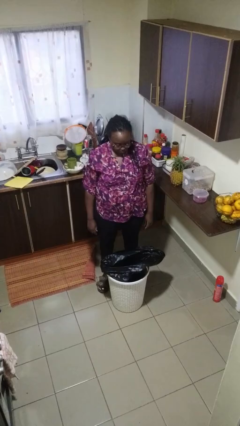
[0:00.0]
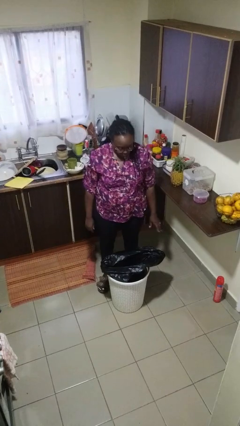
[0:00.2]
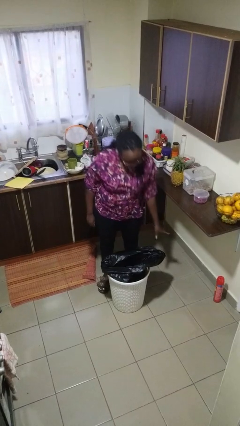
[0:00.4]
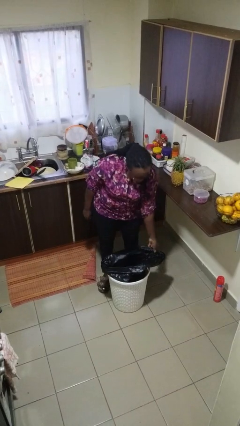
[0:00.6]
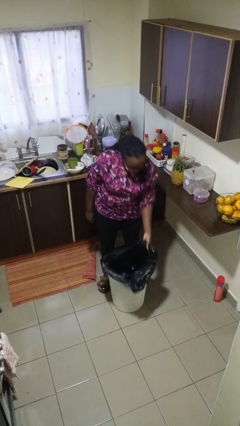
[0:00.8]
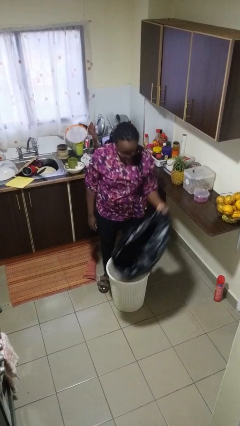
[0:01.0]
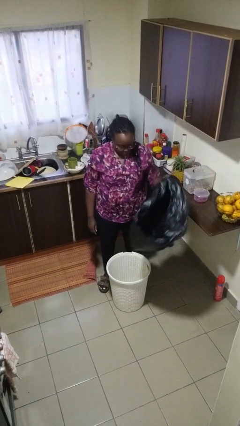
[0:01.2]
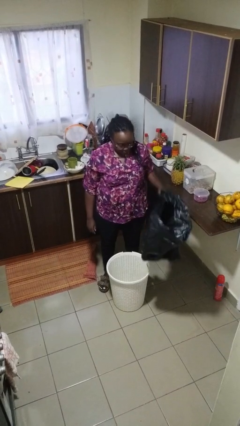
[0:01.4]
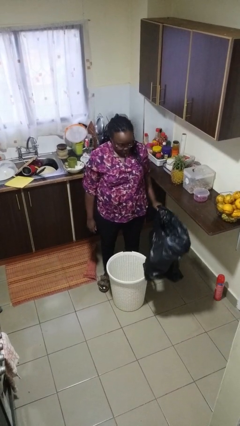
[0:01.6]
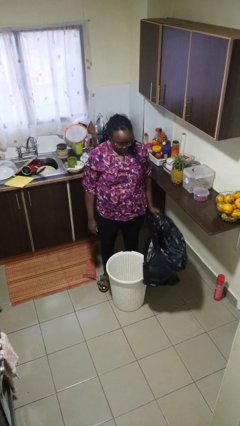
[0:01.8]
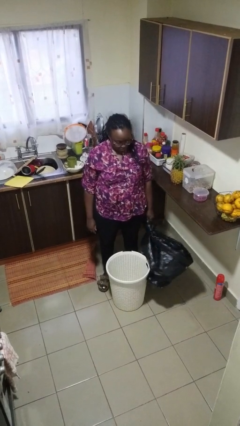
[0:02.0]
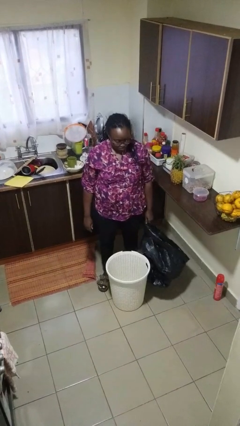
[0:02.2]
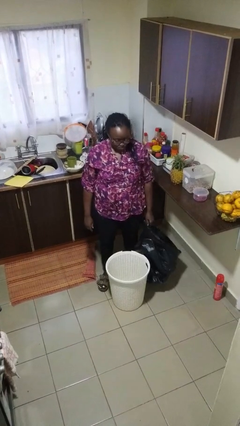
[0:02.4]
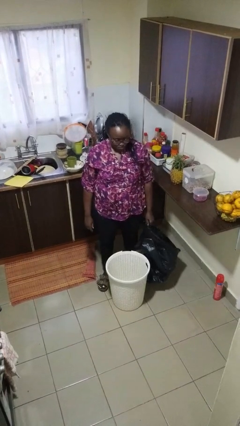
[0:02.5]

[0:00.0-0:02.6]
person inserts trashbag into trashcan

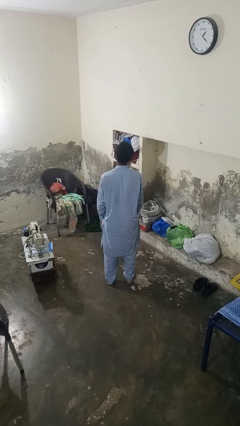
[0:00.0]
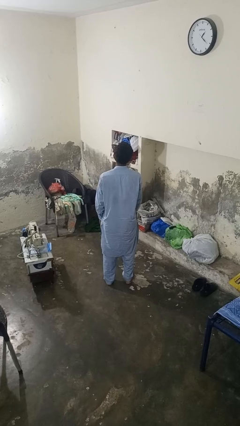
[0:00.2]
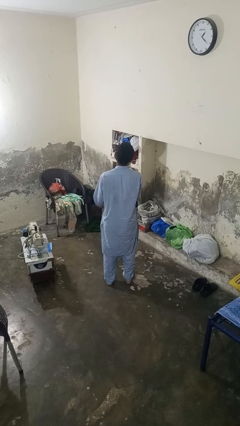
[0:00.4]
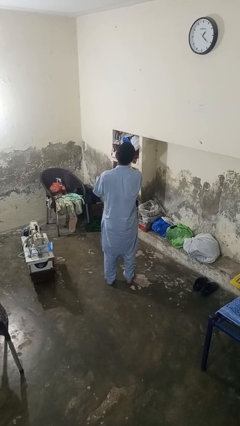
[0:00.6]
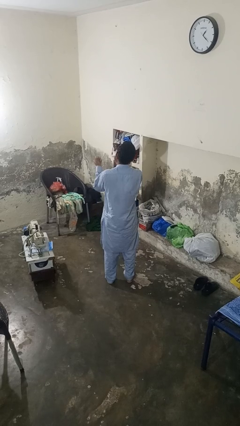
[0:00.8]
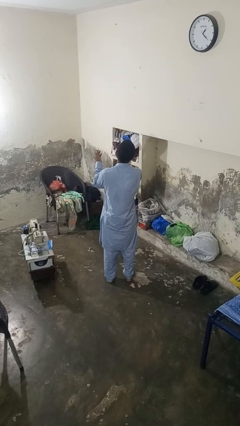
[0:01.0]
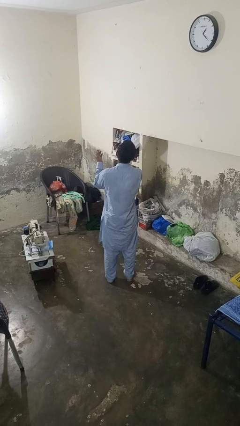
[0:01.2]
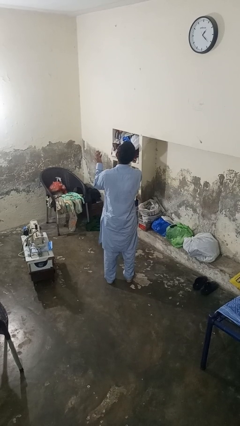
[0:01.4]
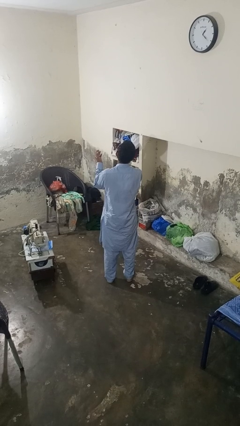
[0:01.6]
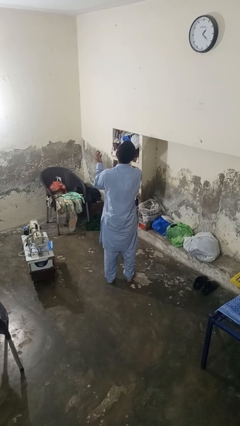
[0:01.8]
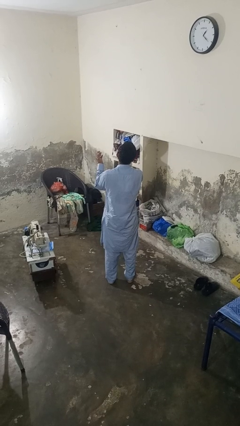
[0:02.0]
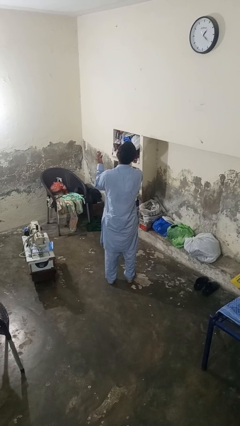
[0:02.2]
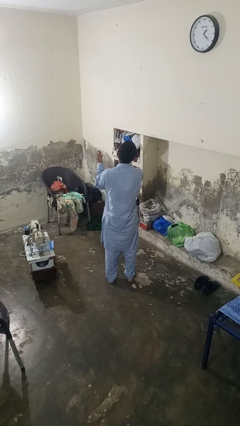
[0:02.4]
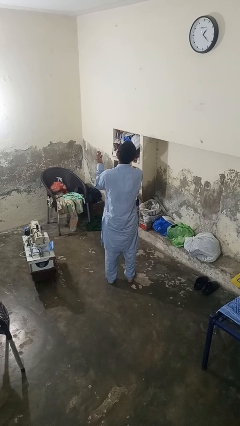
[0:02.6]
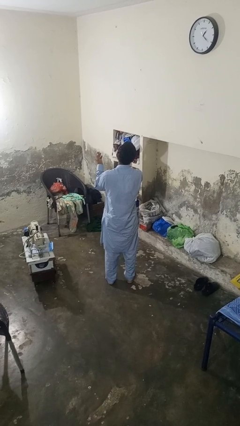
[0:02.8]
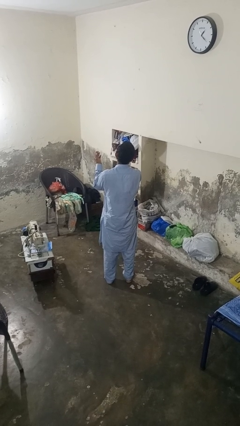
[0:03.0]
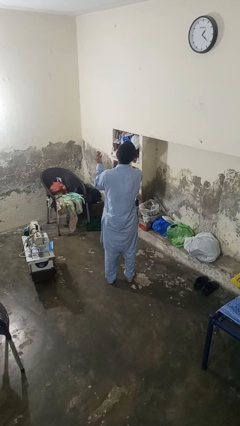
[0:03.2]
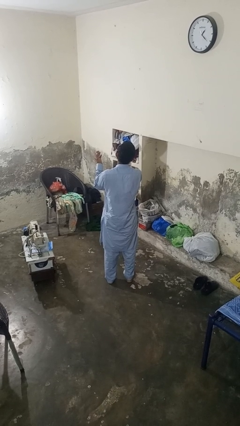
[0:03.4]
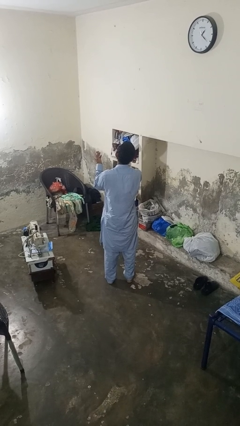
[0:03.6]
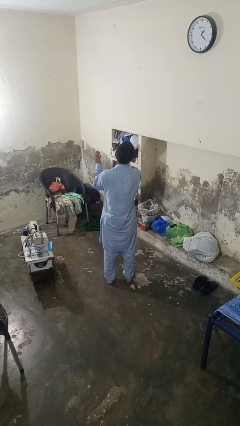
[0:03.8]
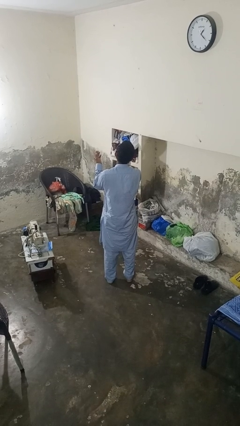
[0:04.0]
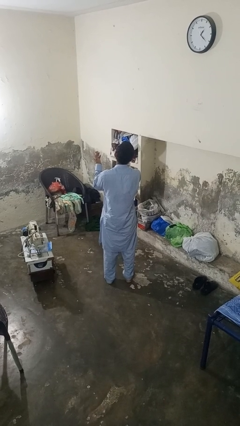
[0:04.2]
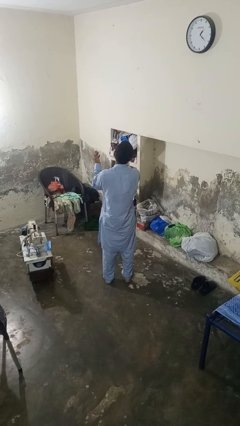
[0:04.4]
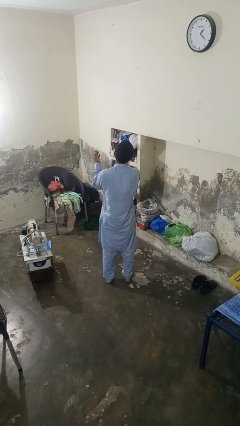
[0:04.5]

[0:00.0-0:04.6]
person prays

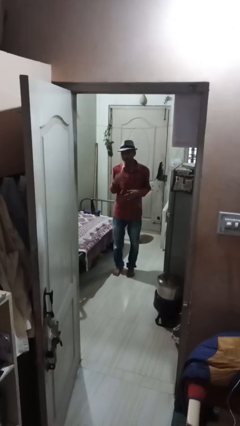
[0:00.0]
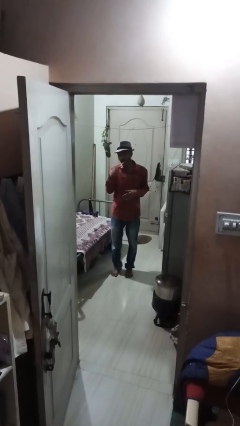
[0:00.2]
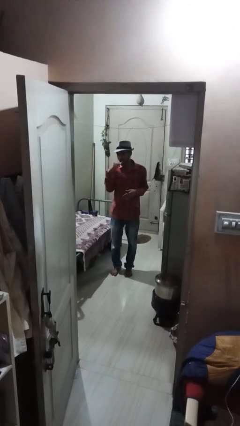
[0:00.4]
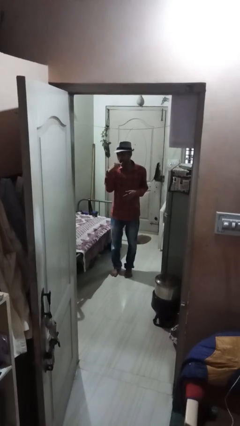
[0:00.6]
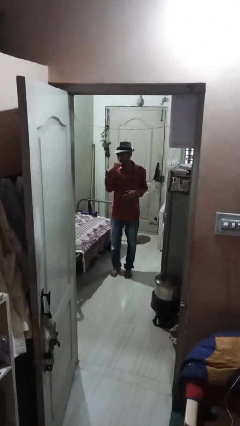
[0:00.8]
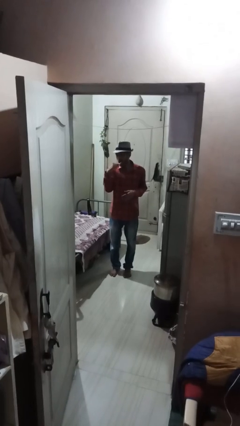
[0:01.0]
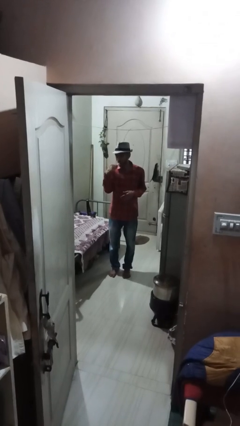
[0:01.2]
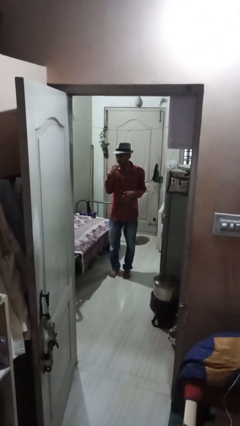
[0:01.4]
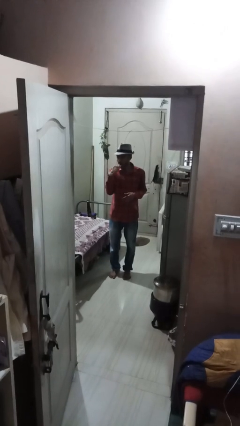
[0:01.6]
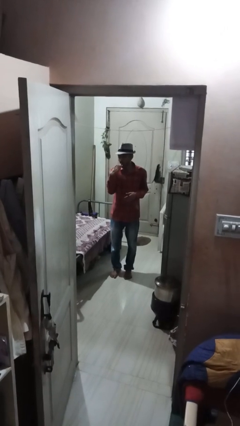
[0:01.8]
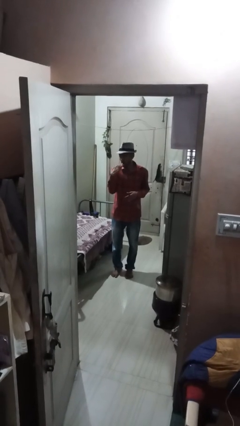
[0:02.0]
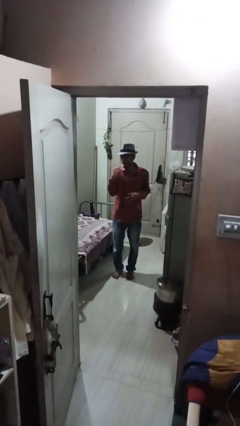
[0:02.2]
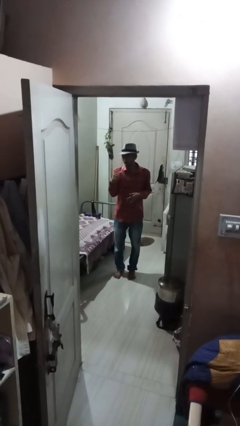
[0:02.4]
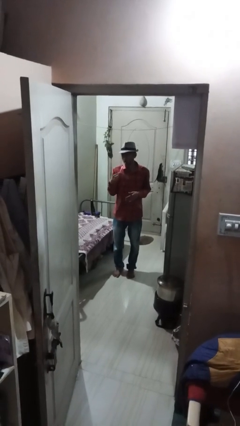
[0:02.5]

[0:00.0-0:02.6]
person brushes teeth

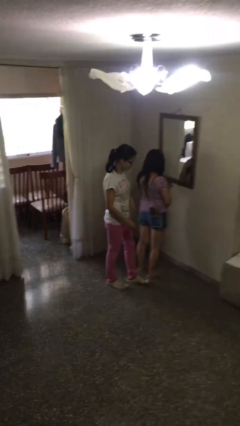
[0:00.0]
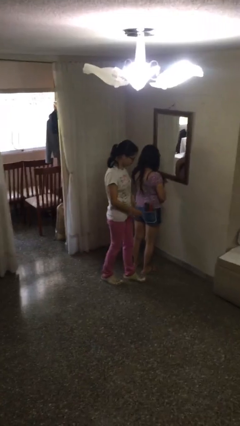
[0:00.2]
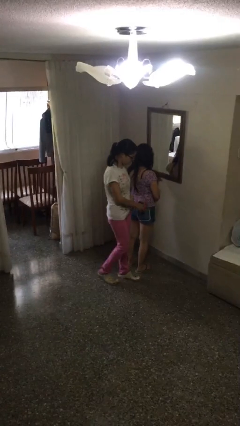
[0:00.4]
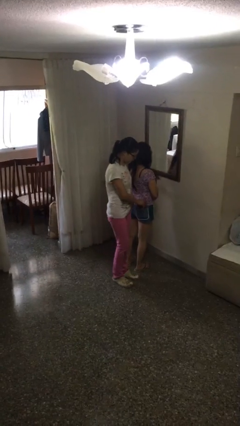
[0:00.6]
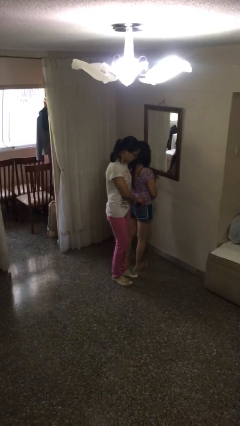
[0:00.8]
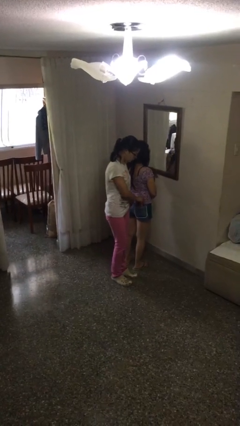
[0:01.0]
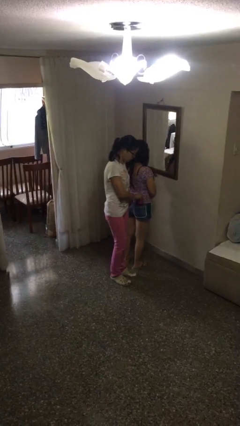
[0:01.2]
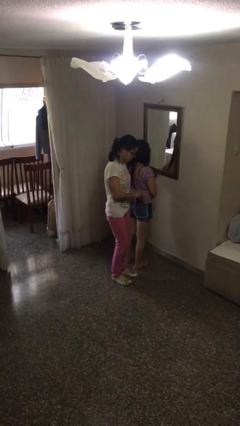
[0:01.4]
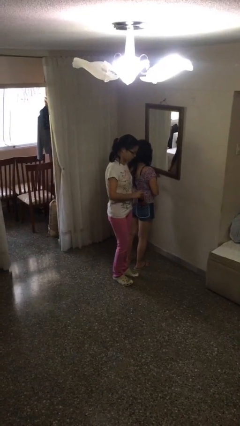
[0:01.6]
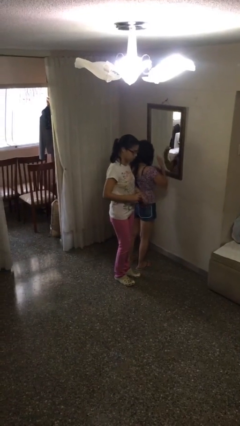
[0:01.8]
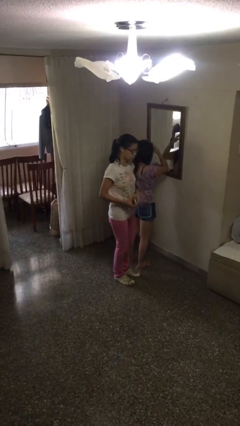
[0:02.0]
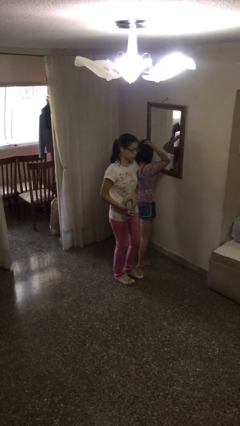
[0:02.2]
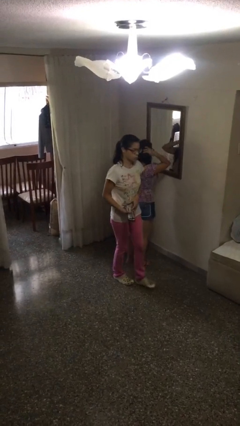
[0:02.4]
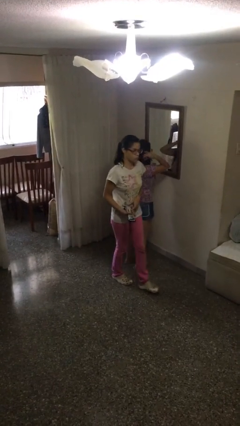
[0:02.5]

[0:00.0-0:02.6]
person steals object from person

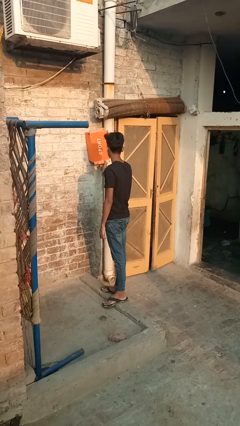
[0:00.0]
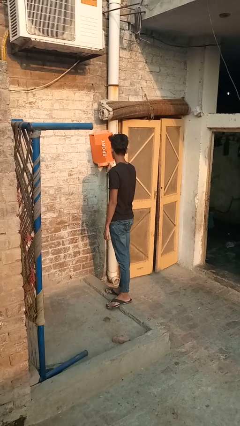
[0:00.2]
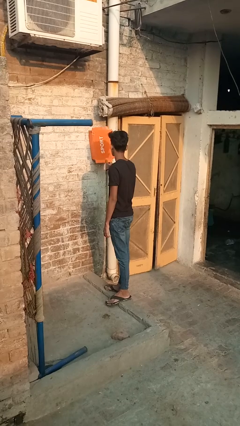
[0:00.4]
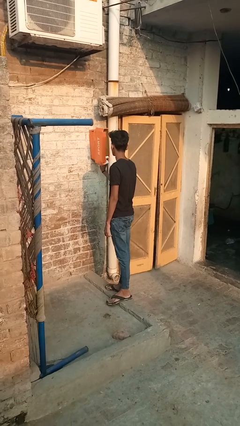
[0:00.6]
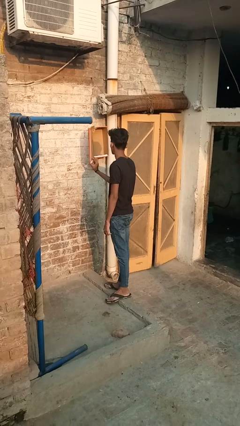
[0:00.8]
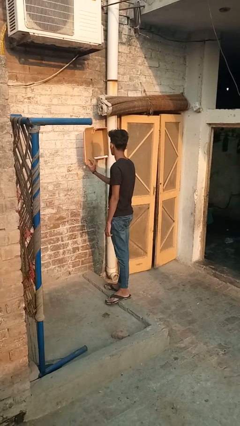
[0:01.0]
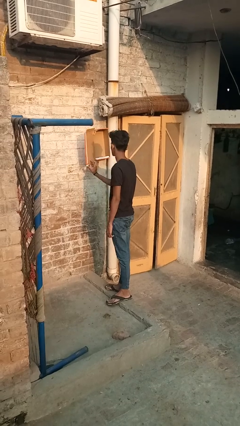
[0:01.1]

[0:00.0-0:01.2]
person closes mailbox

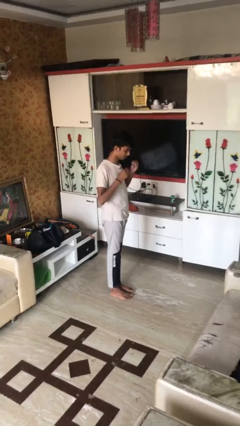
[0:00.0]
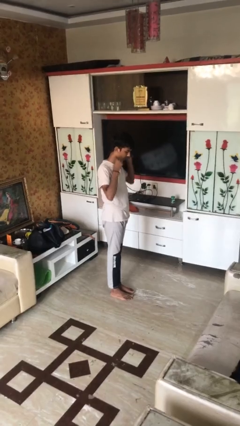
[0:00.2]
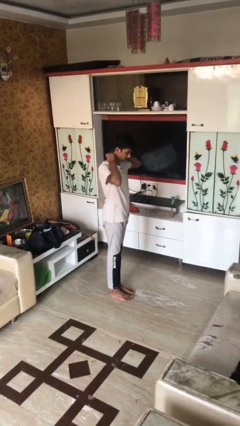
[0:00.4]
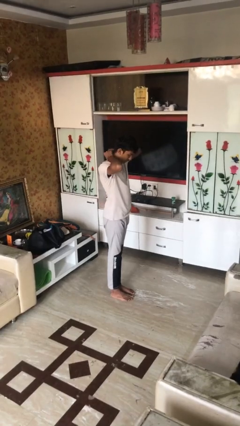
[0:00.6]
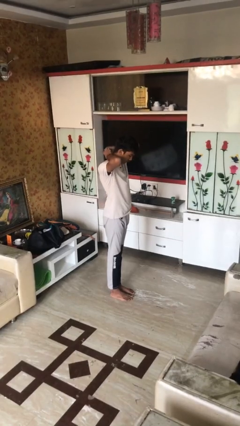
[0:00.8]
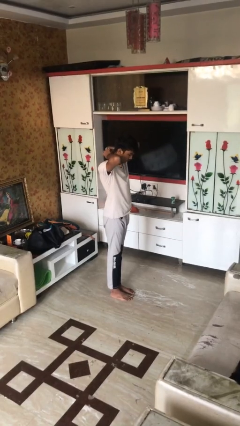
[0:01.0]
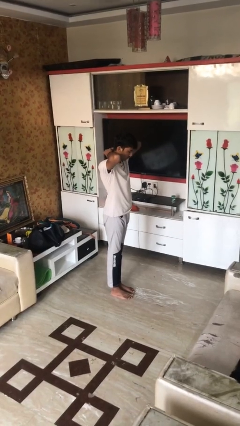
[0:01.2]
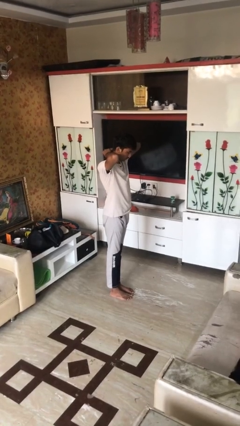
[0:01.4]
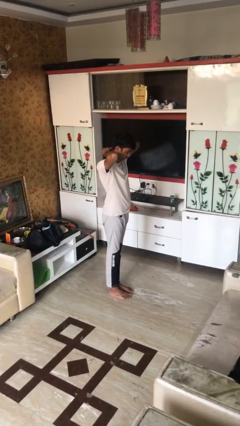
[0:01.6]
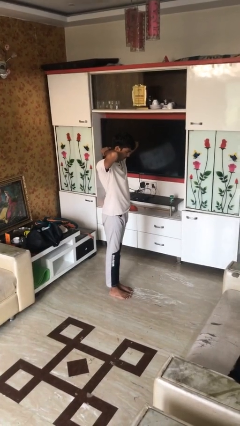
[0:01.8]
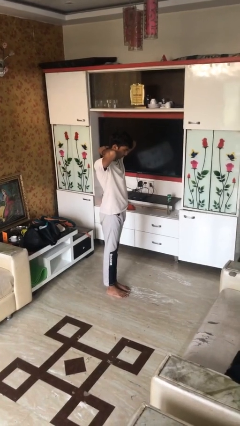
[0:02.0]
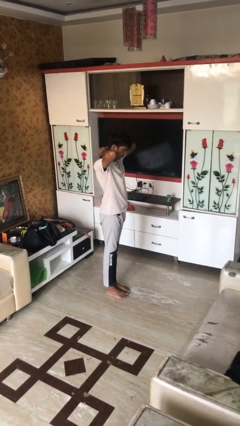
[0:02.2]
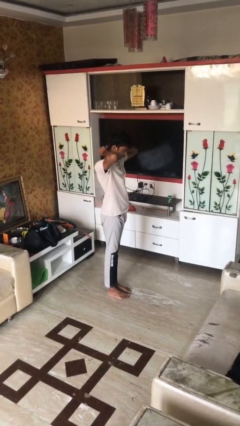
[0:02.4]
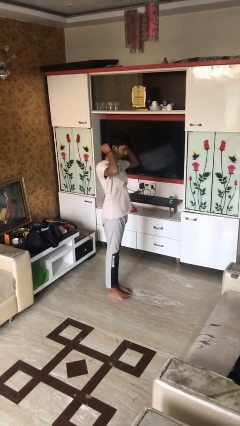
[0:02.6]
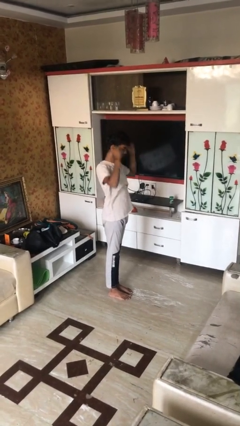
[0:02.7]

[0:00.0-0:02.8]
person puts on necklace

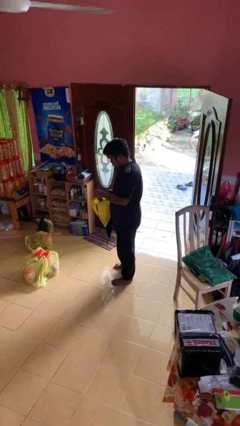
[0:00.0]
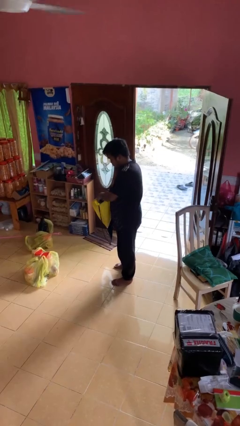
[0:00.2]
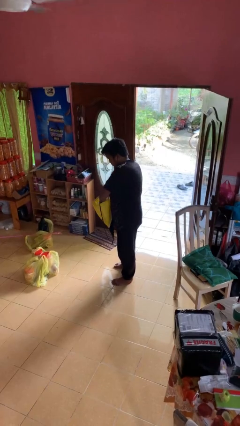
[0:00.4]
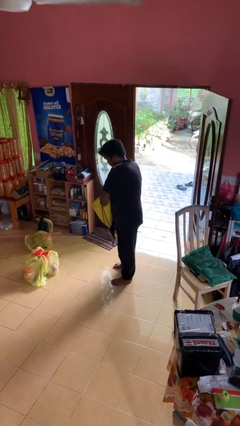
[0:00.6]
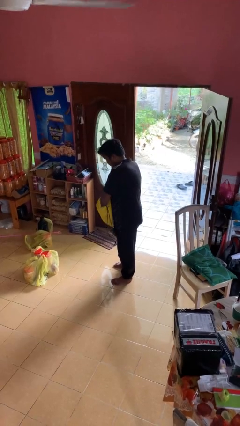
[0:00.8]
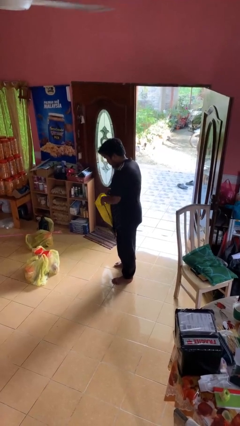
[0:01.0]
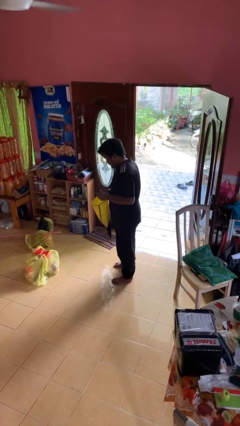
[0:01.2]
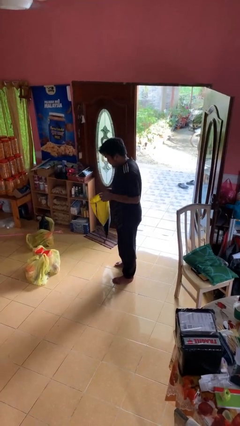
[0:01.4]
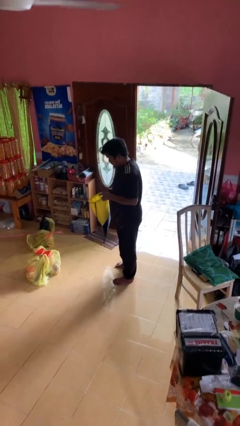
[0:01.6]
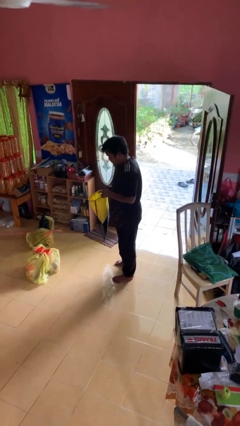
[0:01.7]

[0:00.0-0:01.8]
person puts object into bag
